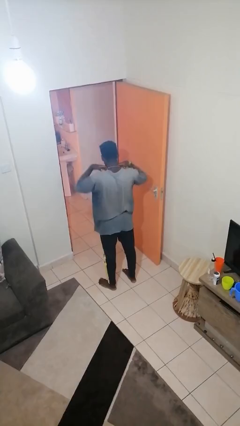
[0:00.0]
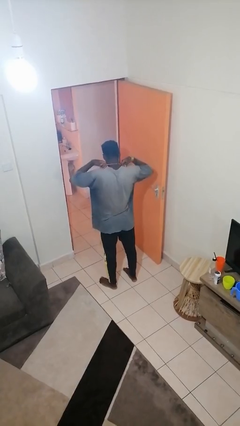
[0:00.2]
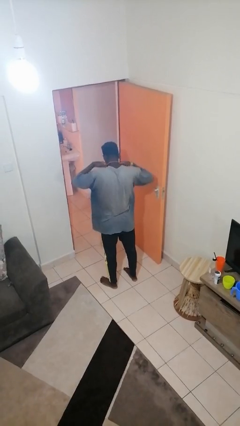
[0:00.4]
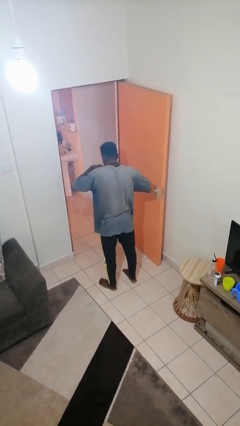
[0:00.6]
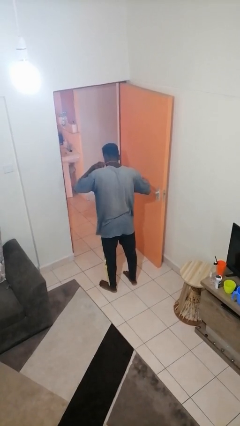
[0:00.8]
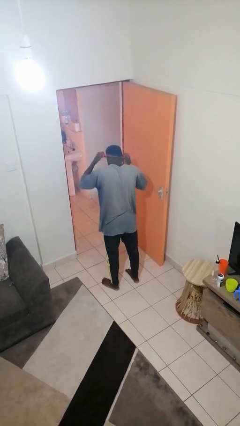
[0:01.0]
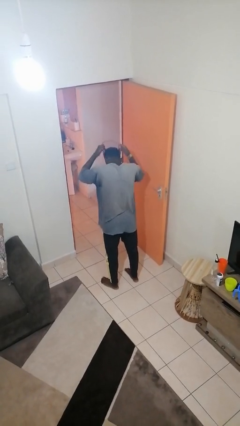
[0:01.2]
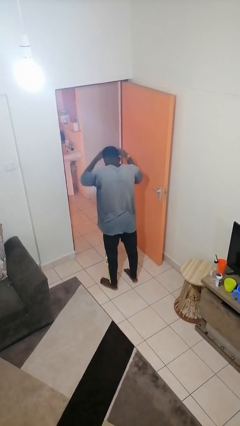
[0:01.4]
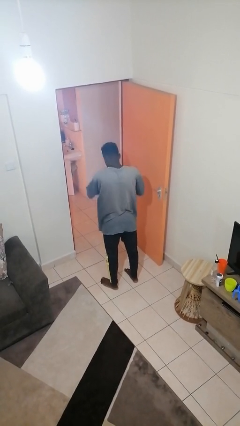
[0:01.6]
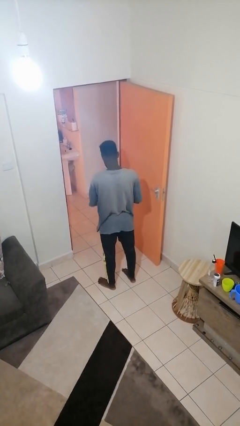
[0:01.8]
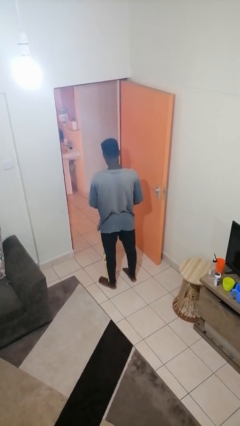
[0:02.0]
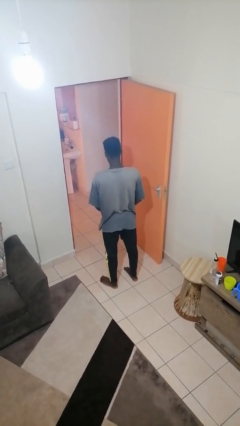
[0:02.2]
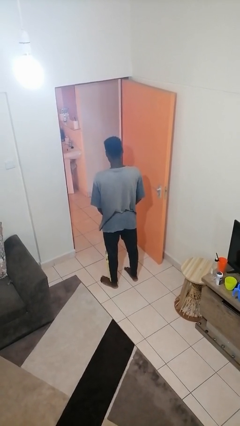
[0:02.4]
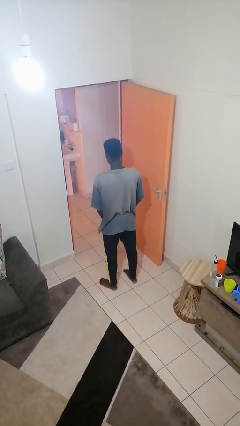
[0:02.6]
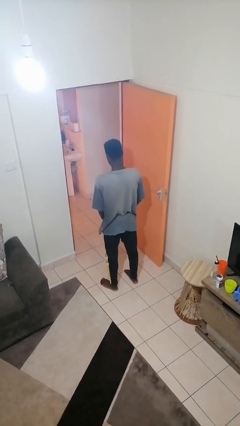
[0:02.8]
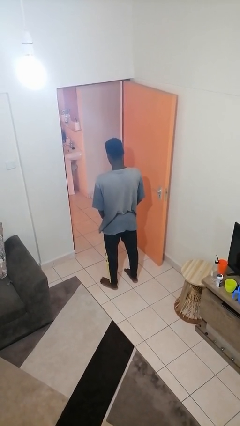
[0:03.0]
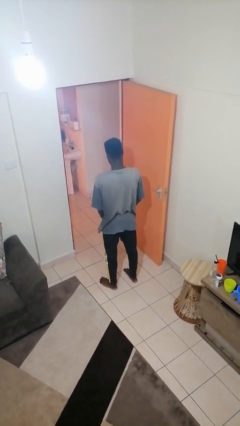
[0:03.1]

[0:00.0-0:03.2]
person takes off necklace

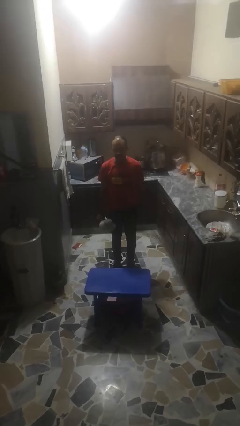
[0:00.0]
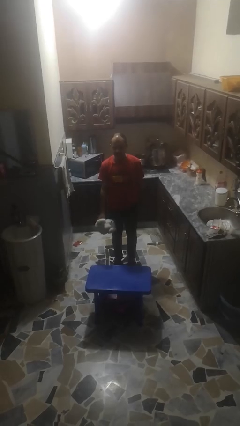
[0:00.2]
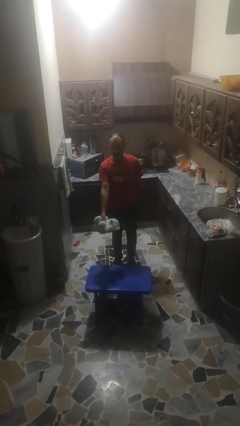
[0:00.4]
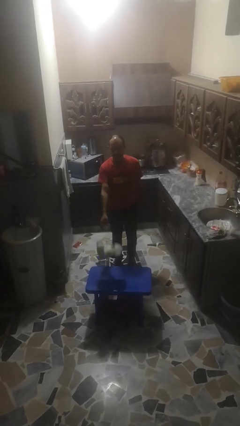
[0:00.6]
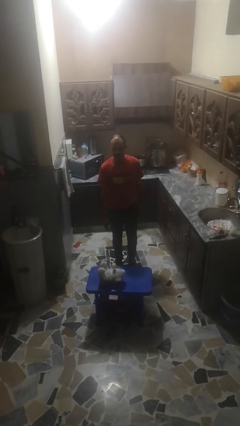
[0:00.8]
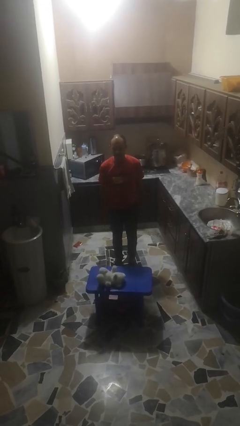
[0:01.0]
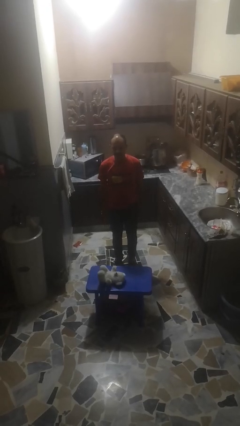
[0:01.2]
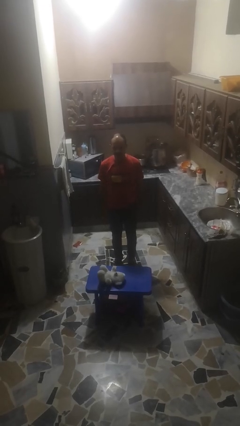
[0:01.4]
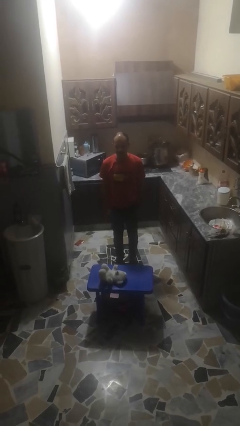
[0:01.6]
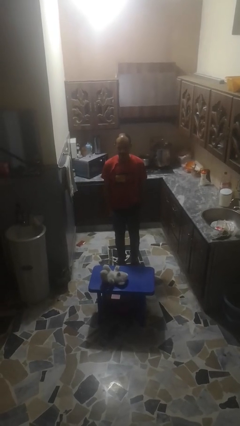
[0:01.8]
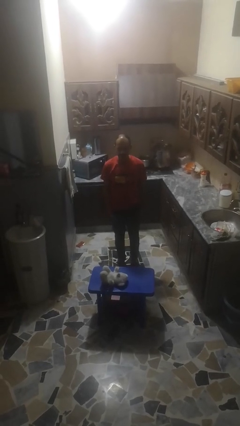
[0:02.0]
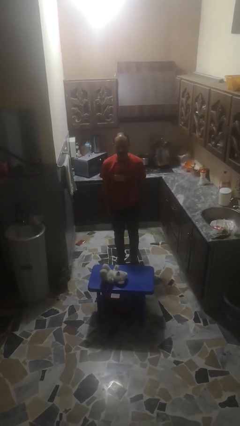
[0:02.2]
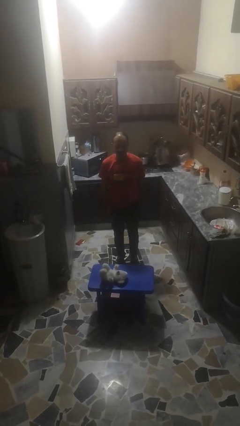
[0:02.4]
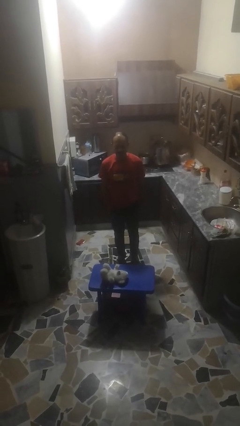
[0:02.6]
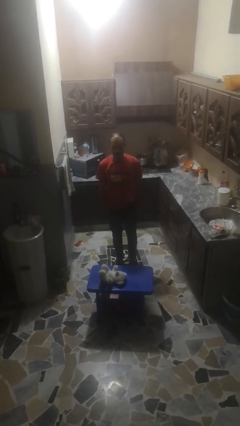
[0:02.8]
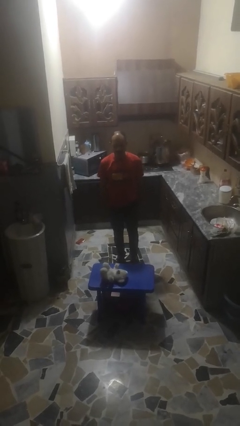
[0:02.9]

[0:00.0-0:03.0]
person throws object to ground

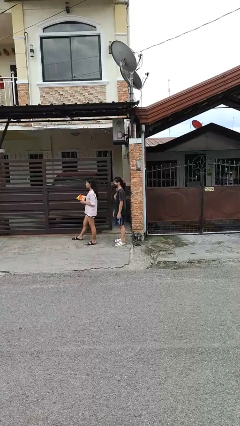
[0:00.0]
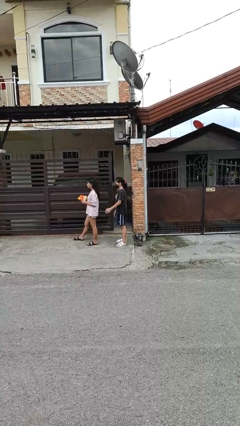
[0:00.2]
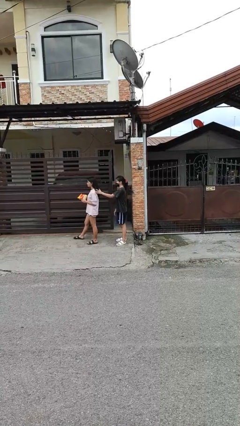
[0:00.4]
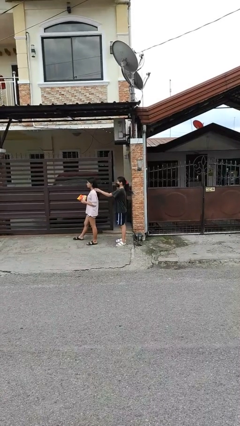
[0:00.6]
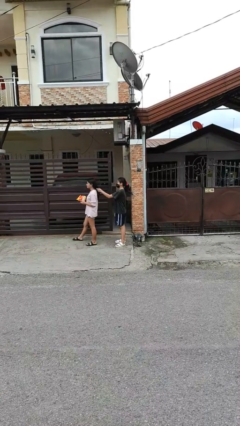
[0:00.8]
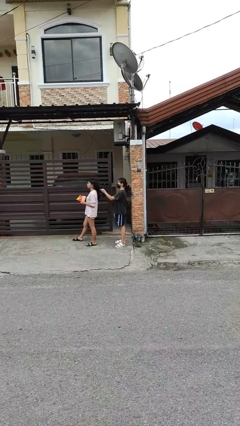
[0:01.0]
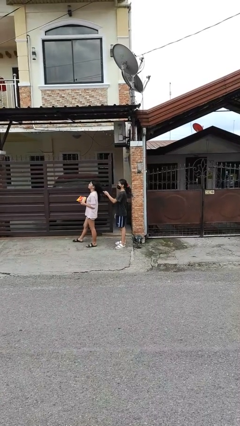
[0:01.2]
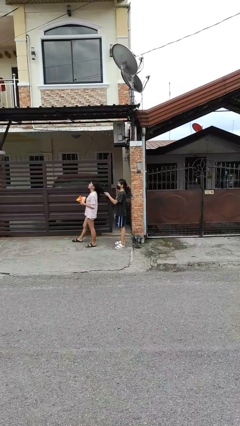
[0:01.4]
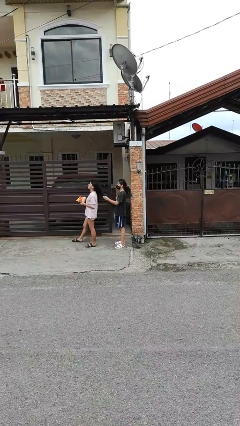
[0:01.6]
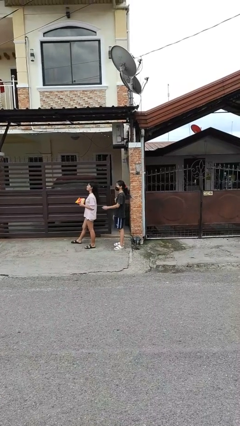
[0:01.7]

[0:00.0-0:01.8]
person grabs person by hair

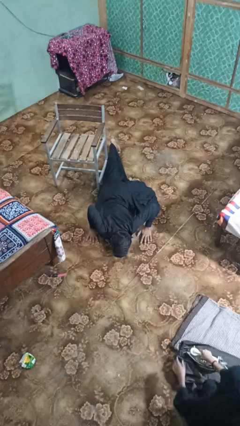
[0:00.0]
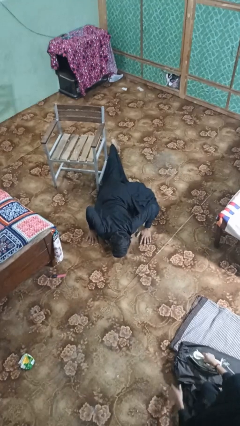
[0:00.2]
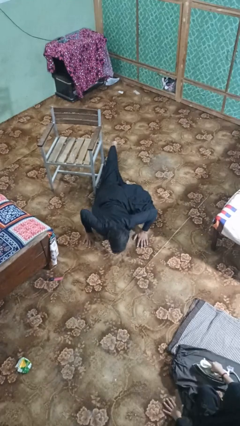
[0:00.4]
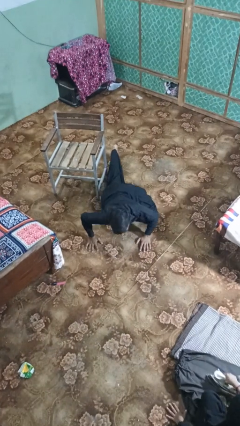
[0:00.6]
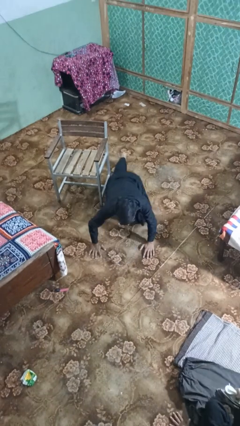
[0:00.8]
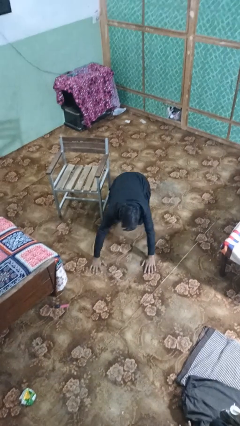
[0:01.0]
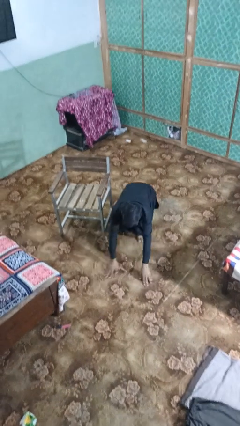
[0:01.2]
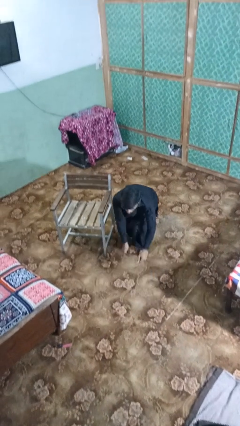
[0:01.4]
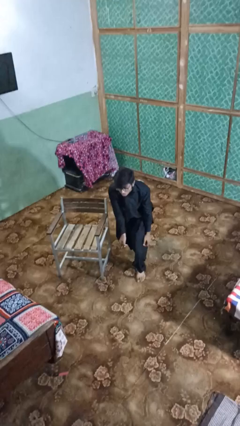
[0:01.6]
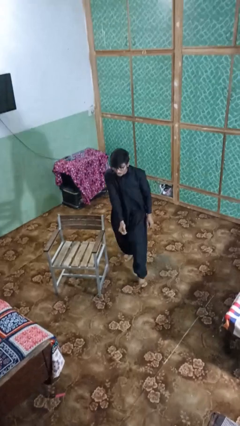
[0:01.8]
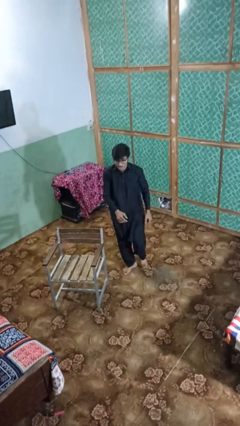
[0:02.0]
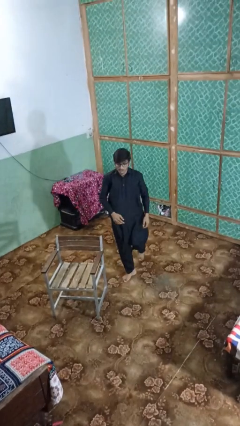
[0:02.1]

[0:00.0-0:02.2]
person stands up from floor

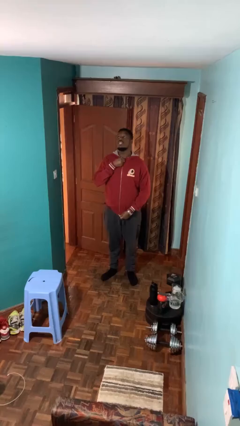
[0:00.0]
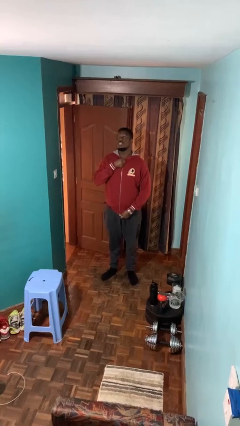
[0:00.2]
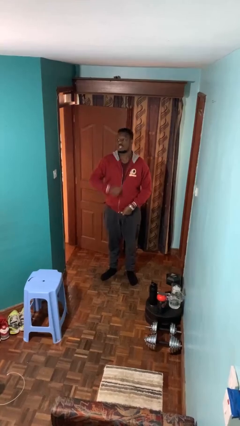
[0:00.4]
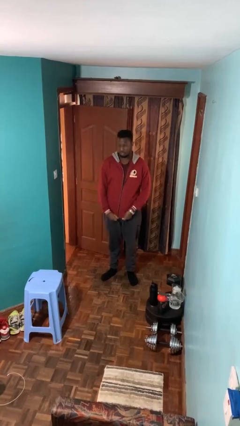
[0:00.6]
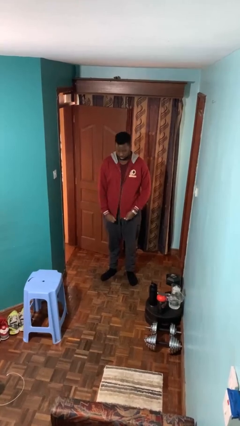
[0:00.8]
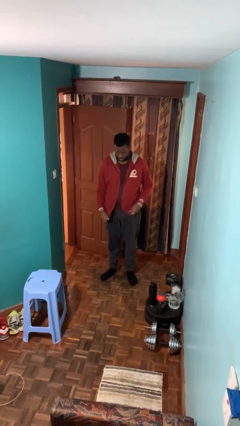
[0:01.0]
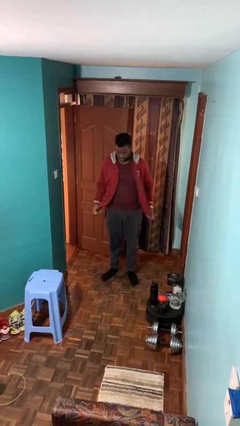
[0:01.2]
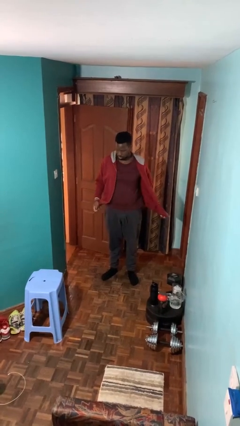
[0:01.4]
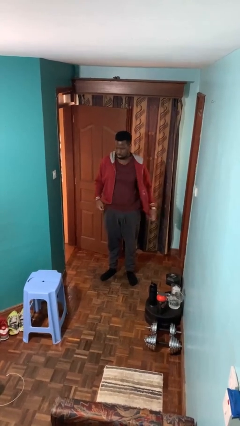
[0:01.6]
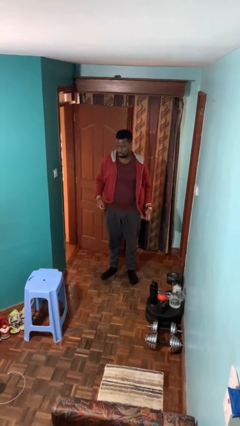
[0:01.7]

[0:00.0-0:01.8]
person unzips jacket

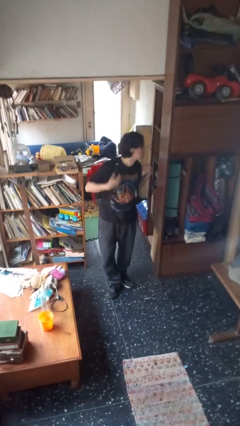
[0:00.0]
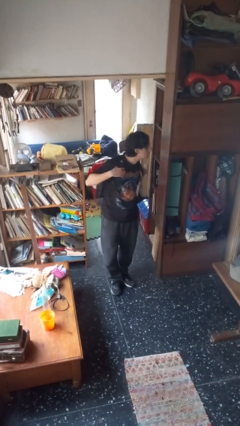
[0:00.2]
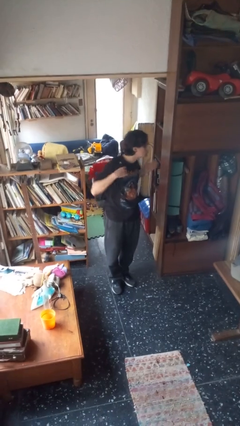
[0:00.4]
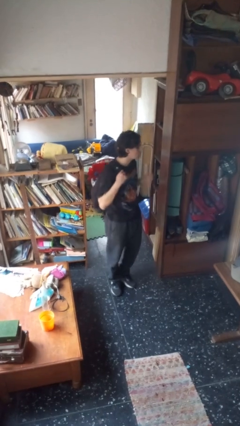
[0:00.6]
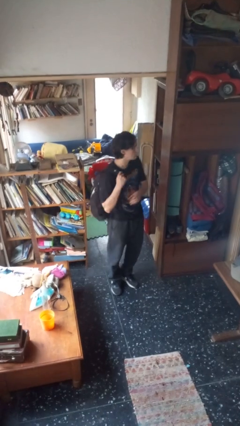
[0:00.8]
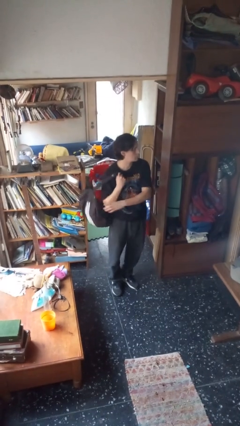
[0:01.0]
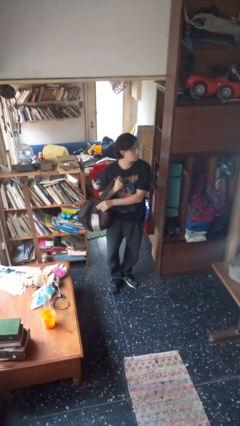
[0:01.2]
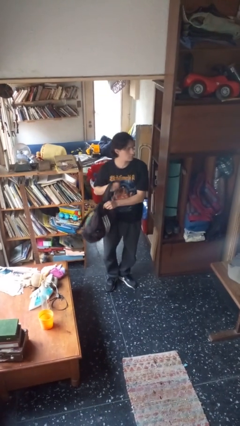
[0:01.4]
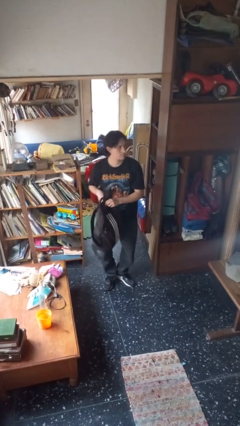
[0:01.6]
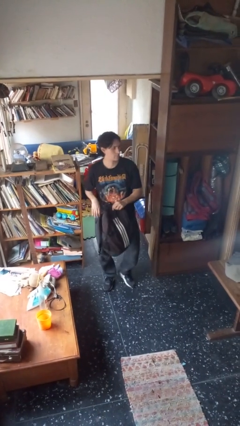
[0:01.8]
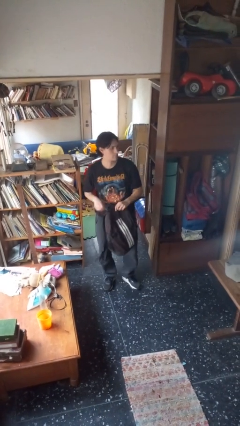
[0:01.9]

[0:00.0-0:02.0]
person takes off backpack

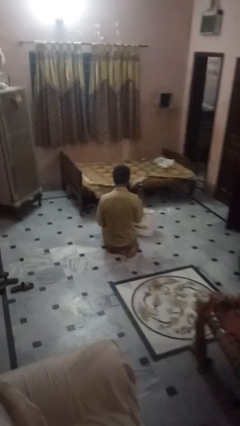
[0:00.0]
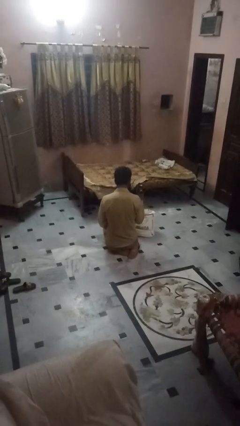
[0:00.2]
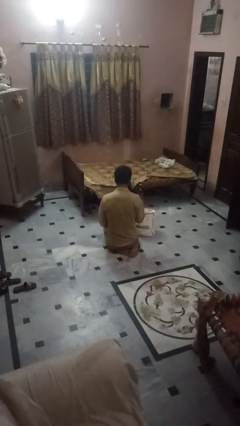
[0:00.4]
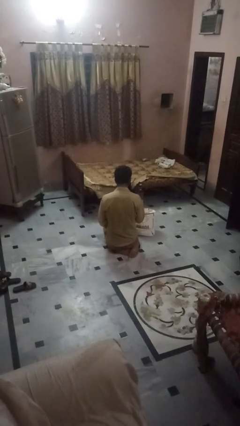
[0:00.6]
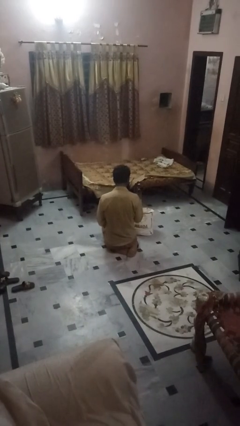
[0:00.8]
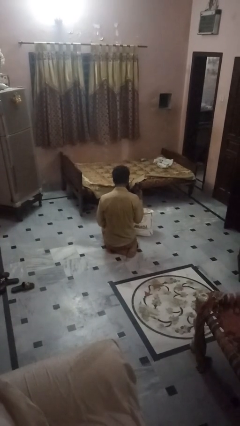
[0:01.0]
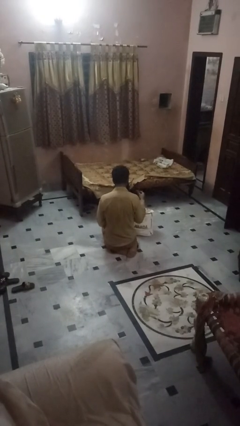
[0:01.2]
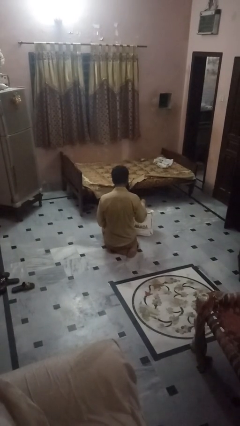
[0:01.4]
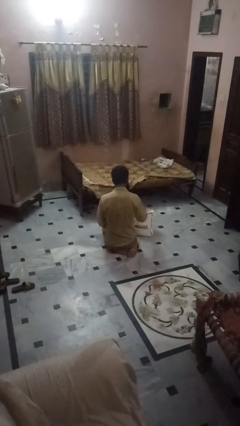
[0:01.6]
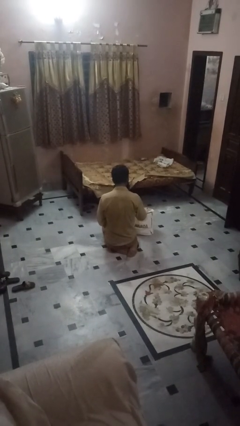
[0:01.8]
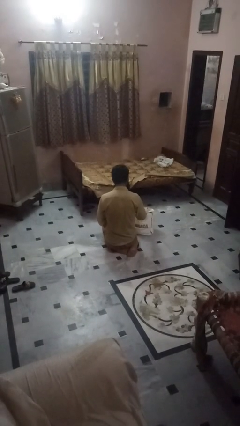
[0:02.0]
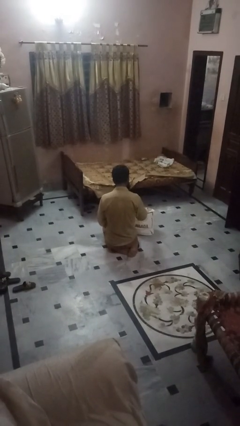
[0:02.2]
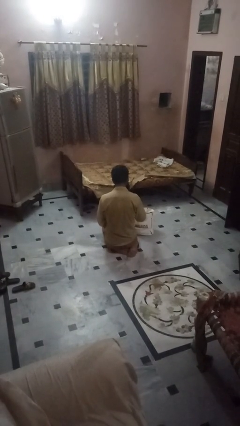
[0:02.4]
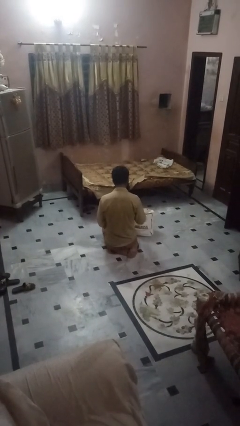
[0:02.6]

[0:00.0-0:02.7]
person puts object into bag

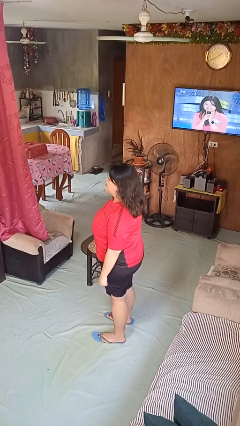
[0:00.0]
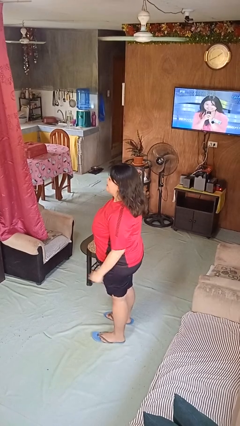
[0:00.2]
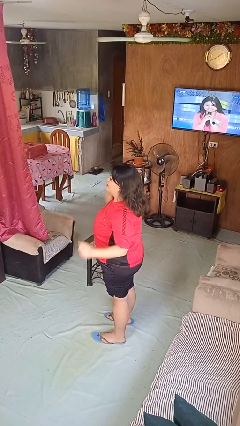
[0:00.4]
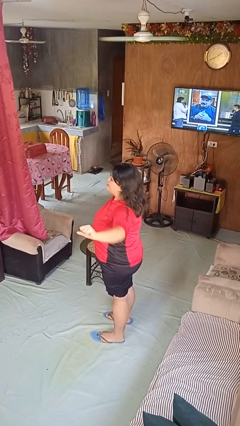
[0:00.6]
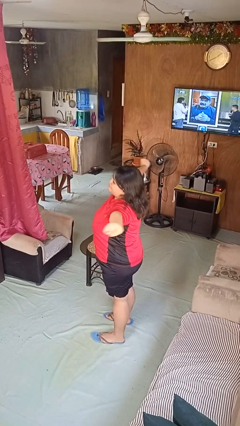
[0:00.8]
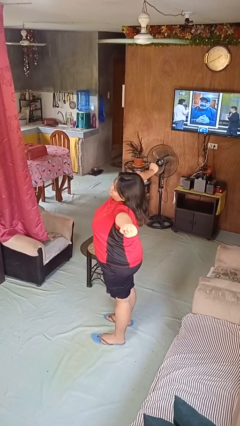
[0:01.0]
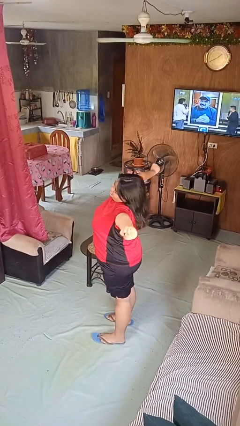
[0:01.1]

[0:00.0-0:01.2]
person stretches arms to side
